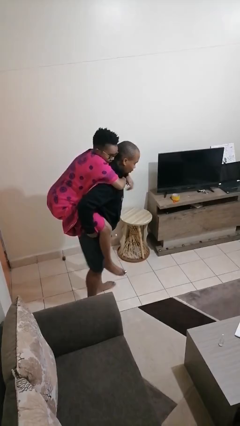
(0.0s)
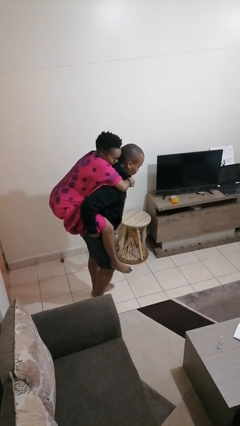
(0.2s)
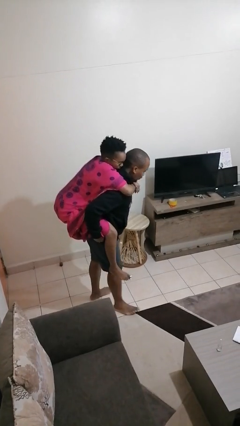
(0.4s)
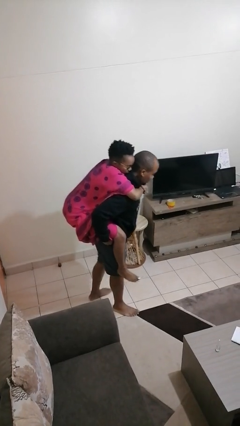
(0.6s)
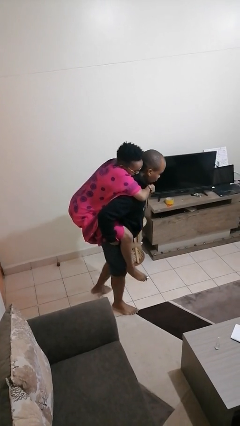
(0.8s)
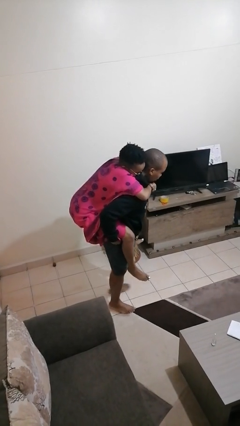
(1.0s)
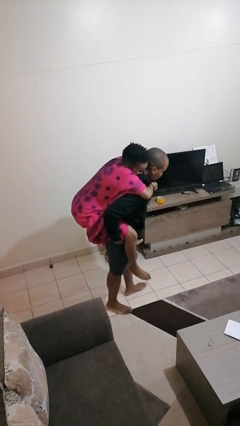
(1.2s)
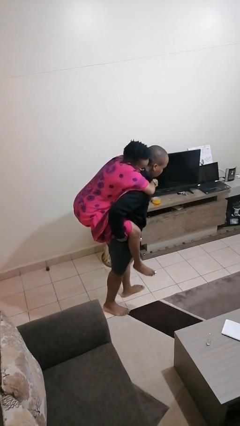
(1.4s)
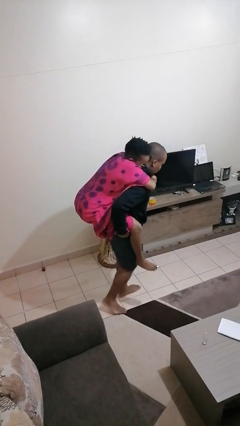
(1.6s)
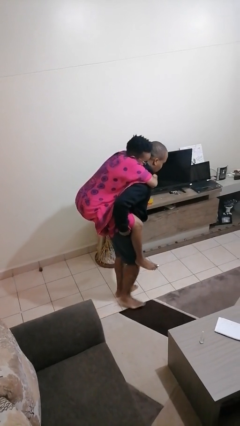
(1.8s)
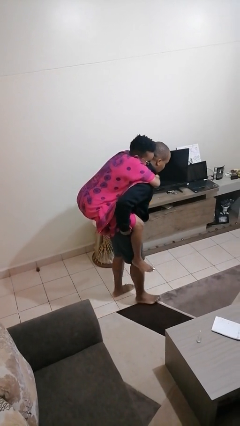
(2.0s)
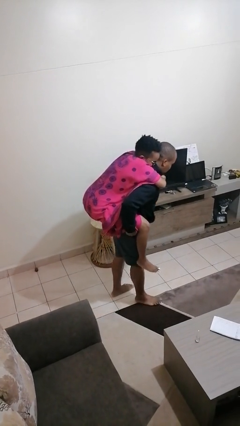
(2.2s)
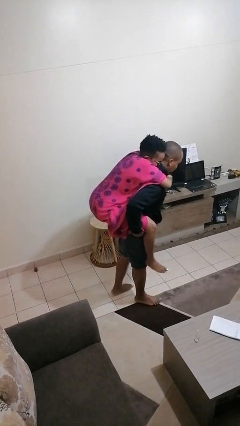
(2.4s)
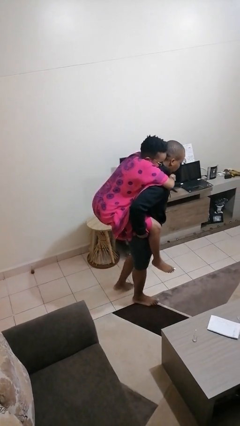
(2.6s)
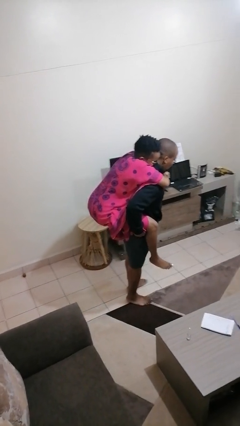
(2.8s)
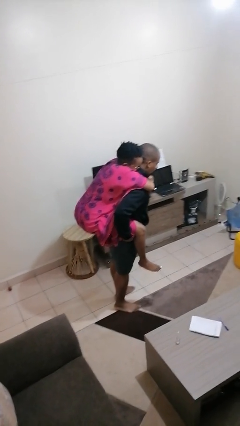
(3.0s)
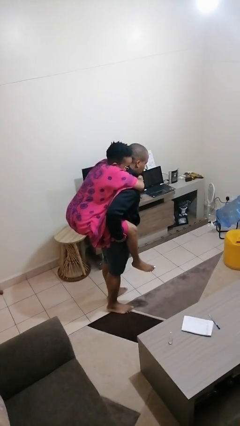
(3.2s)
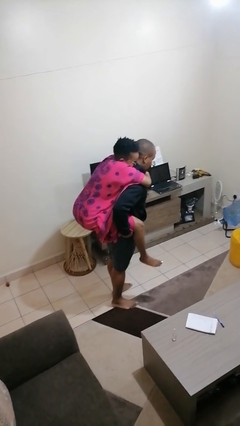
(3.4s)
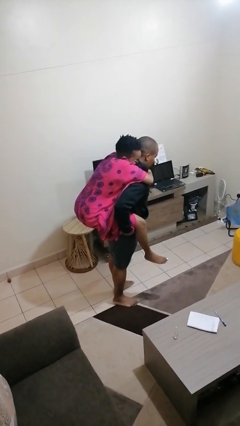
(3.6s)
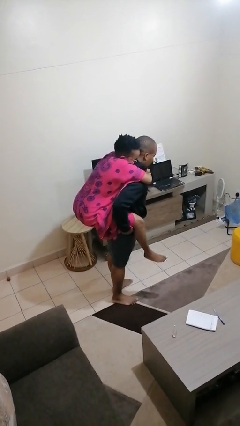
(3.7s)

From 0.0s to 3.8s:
person carries person on back

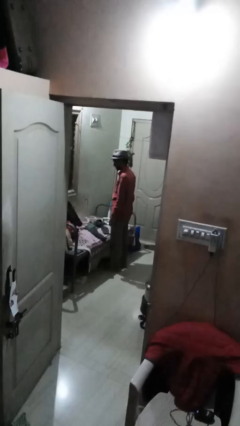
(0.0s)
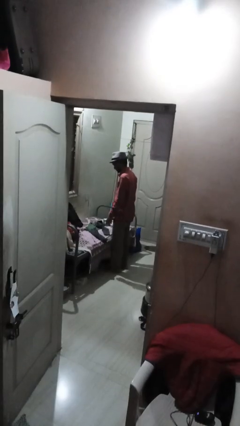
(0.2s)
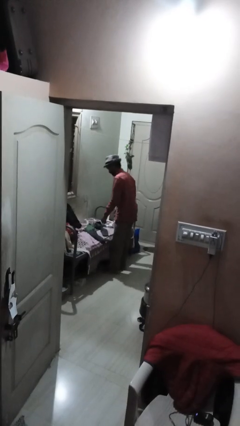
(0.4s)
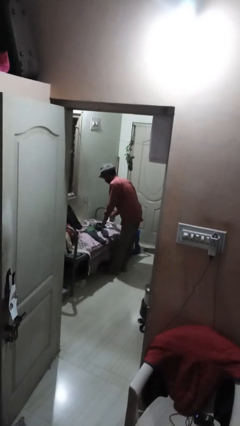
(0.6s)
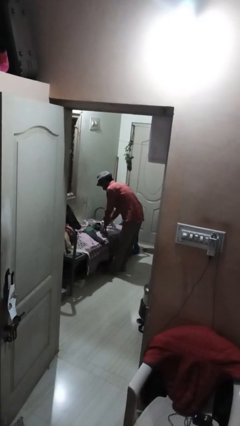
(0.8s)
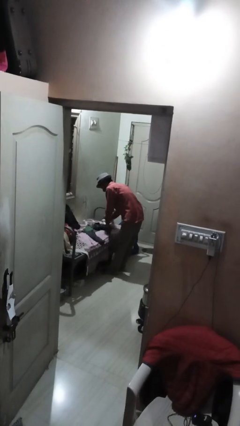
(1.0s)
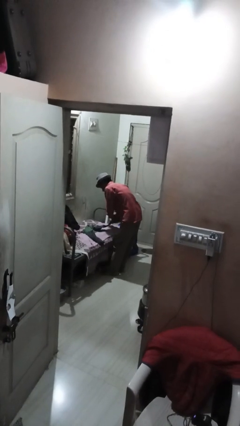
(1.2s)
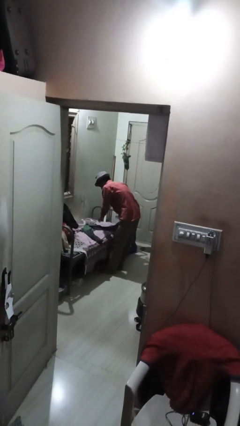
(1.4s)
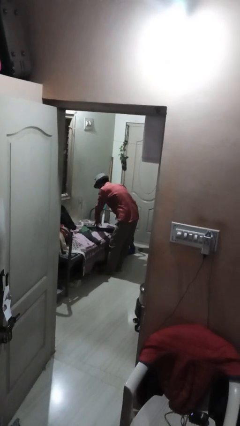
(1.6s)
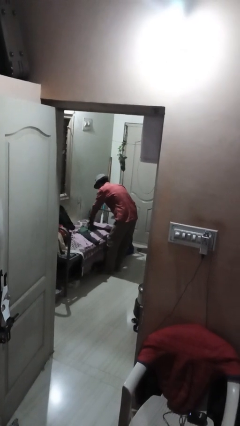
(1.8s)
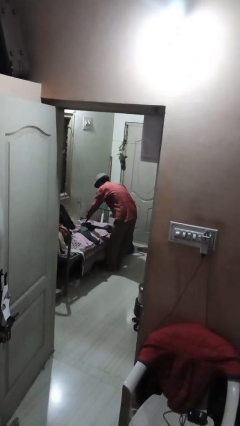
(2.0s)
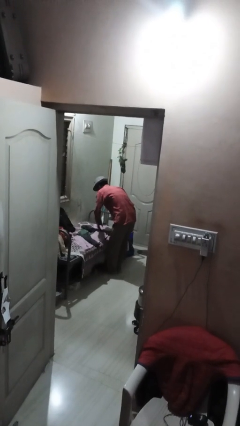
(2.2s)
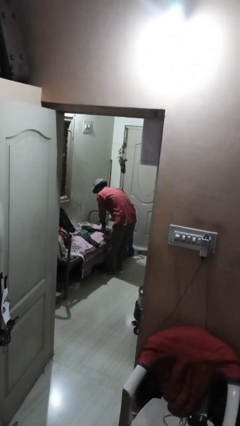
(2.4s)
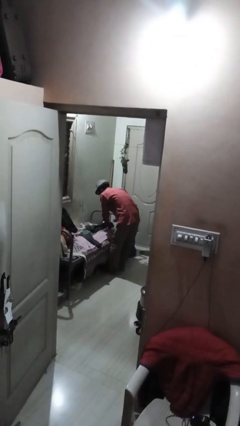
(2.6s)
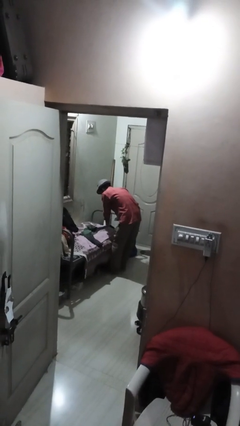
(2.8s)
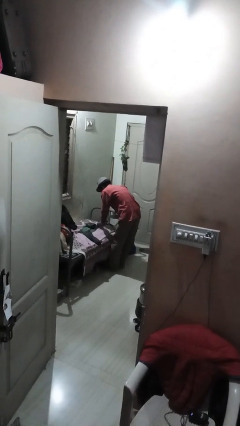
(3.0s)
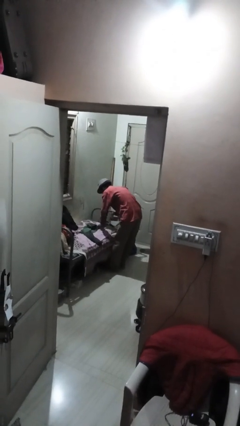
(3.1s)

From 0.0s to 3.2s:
person irons clothes

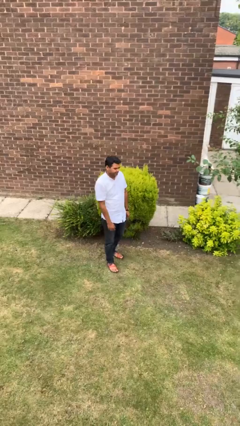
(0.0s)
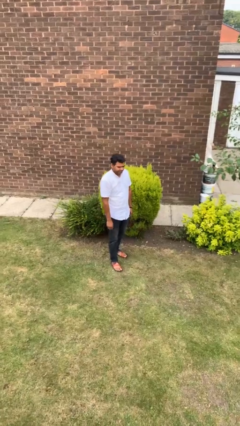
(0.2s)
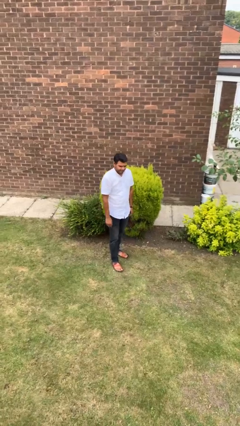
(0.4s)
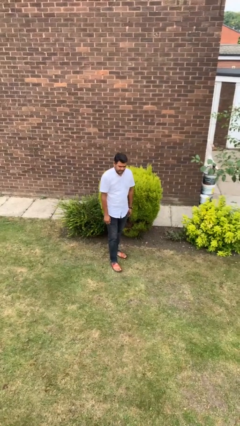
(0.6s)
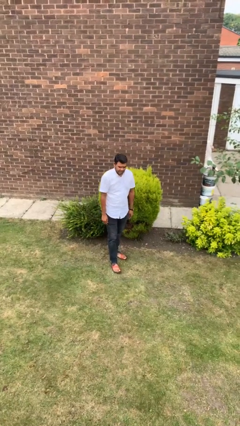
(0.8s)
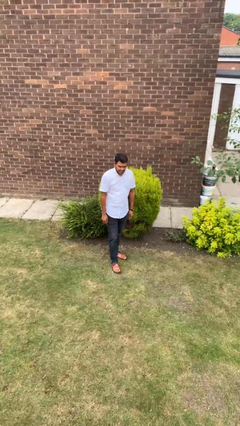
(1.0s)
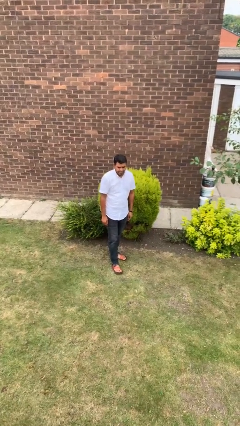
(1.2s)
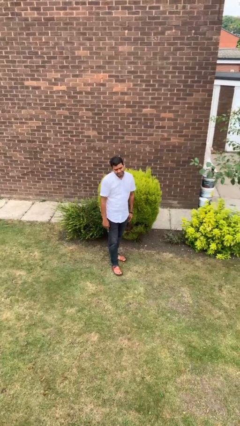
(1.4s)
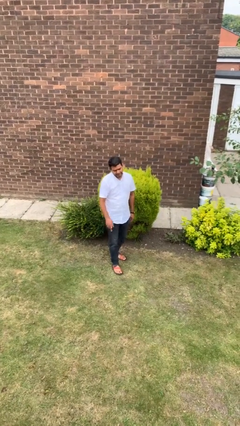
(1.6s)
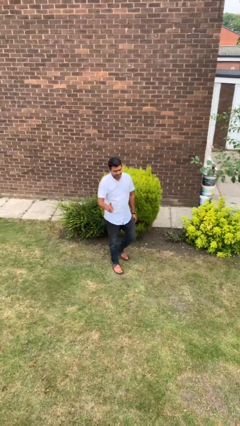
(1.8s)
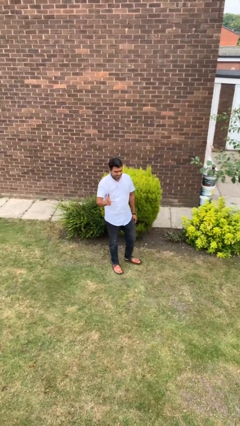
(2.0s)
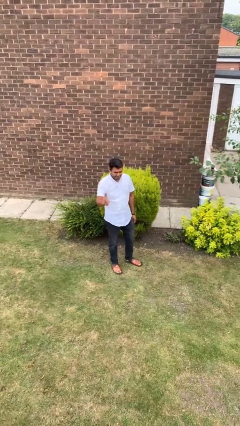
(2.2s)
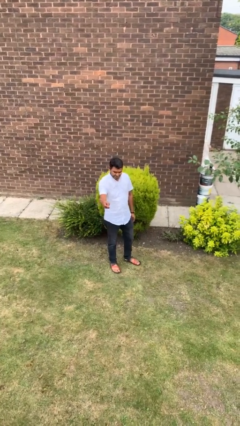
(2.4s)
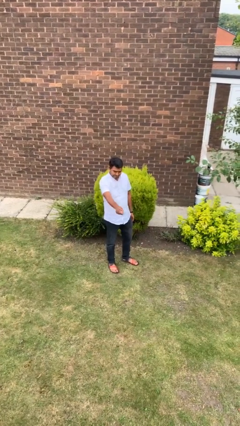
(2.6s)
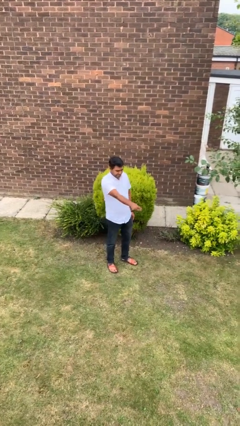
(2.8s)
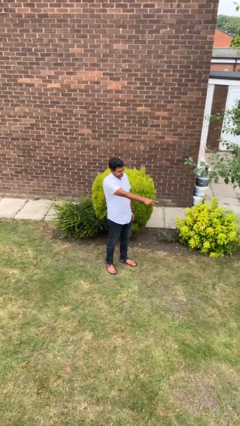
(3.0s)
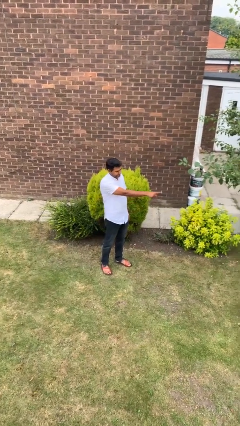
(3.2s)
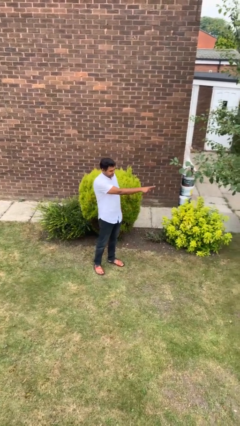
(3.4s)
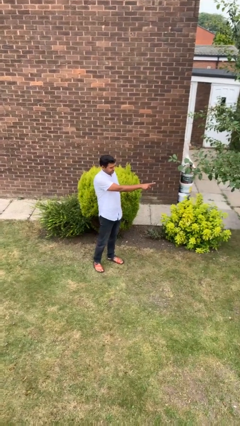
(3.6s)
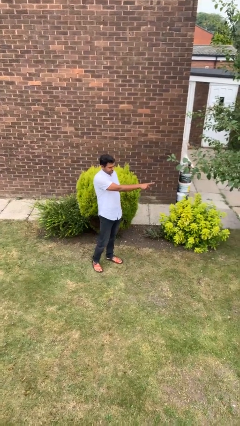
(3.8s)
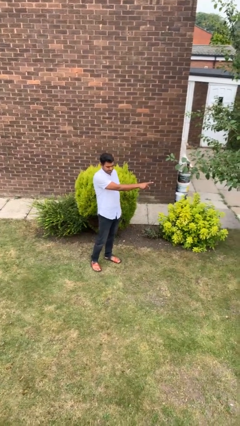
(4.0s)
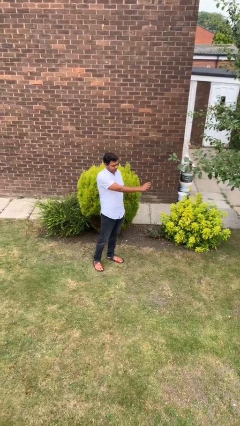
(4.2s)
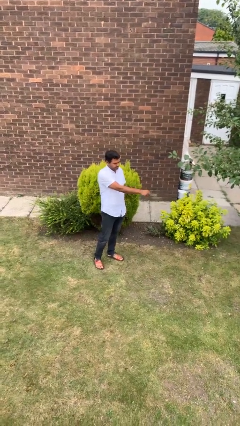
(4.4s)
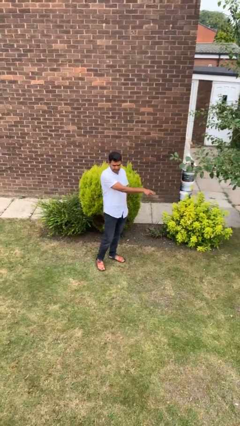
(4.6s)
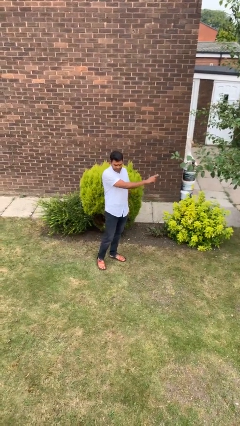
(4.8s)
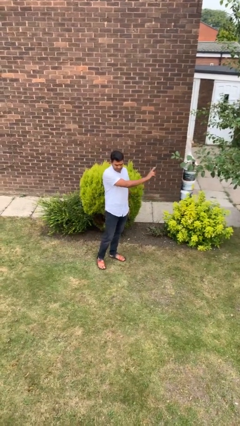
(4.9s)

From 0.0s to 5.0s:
person gestures swipe left

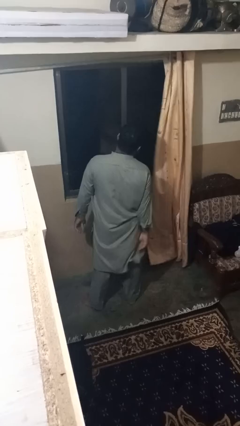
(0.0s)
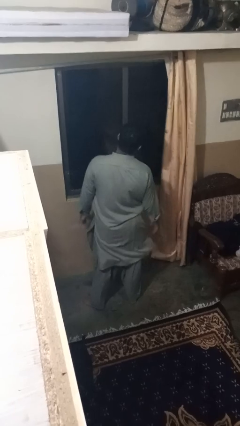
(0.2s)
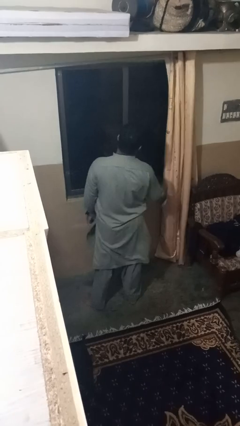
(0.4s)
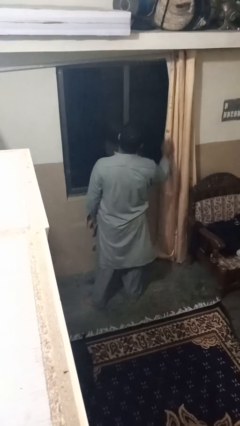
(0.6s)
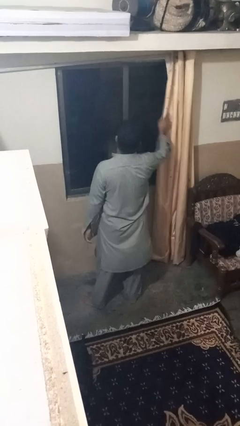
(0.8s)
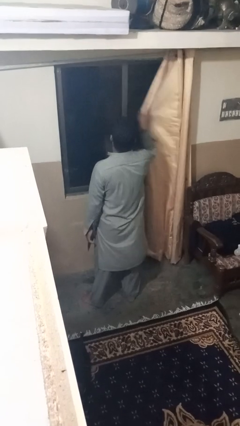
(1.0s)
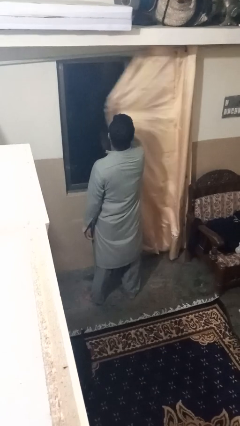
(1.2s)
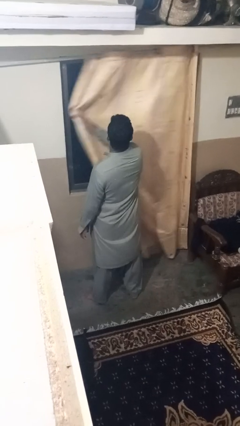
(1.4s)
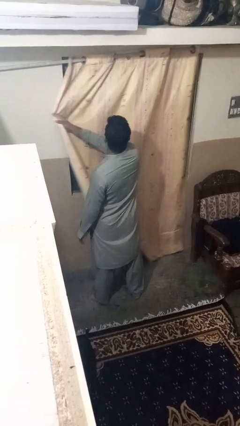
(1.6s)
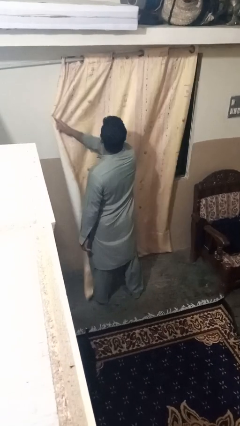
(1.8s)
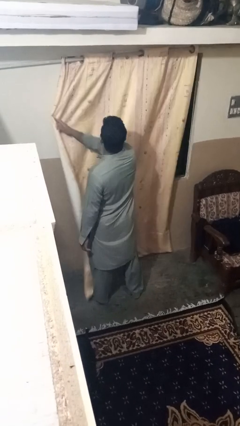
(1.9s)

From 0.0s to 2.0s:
person closes curtains

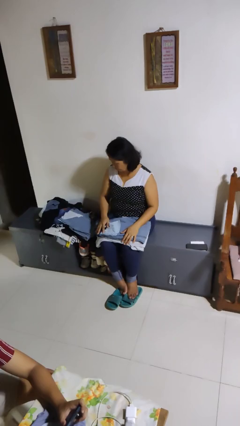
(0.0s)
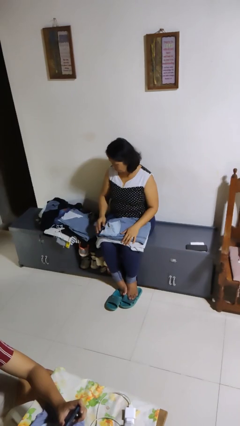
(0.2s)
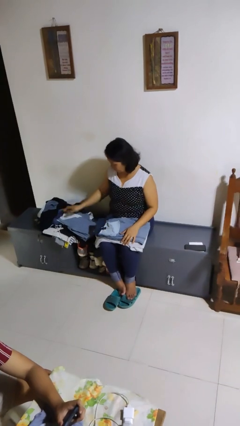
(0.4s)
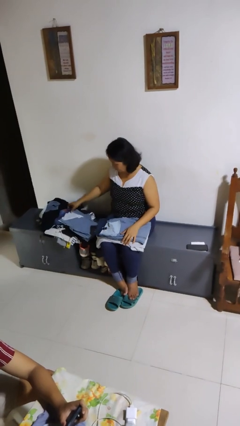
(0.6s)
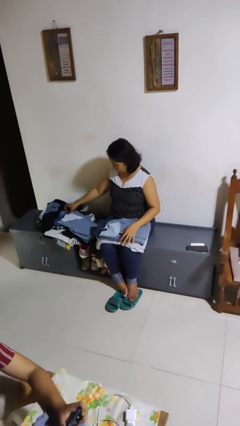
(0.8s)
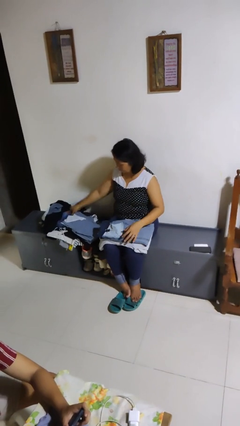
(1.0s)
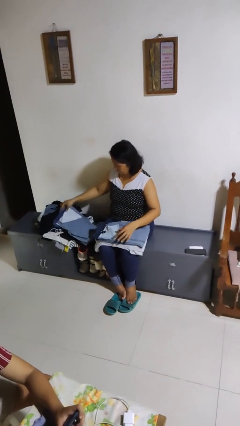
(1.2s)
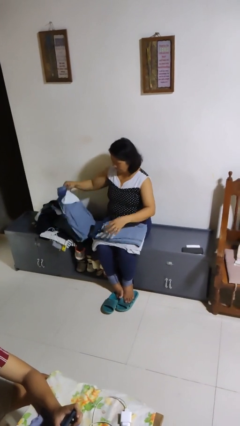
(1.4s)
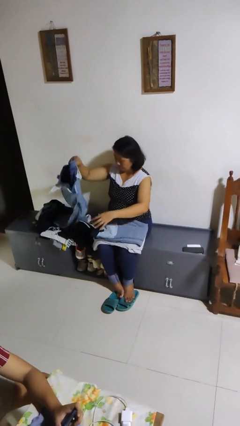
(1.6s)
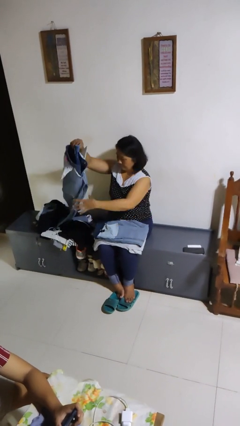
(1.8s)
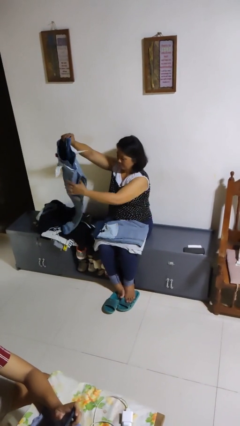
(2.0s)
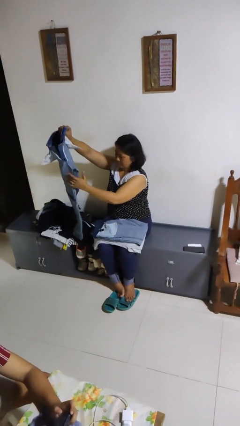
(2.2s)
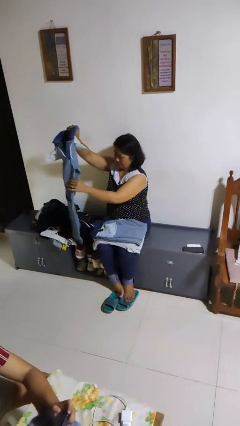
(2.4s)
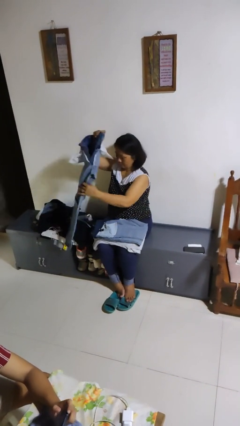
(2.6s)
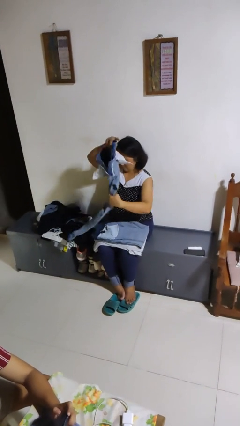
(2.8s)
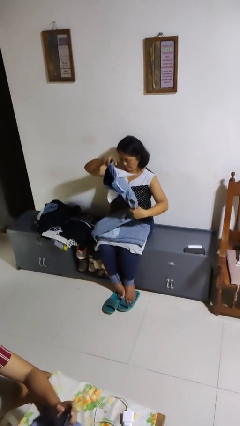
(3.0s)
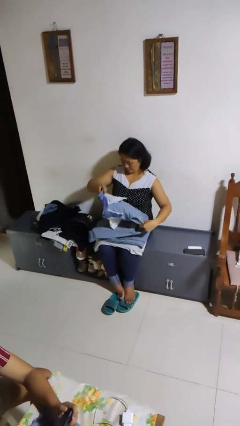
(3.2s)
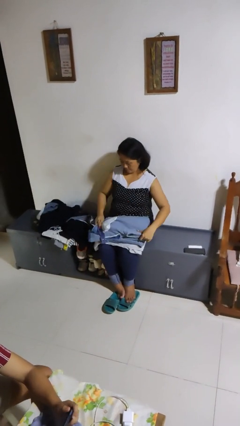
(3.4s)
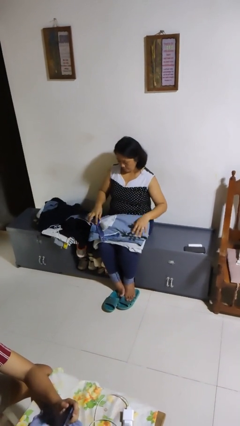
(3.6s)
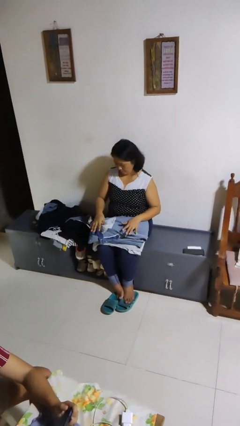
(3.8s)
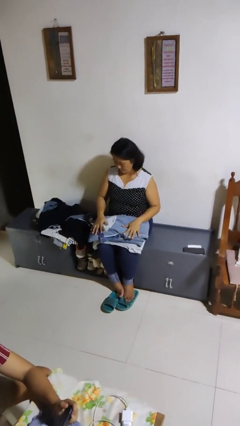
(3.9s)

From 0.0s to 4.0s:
person folds pants
